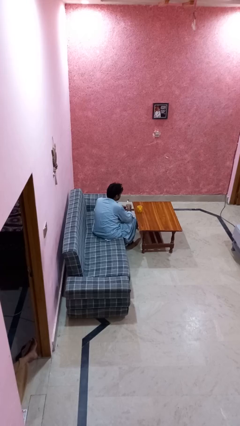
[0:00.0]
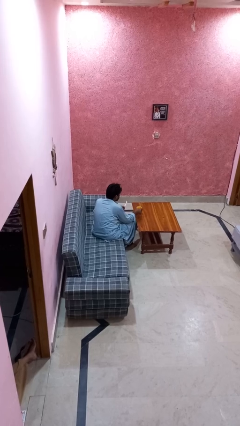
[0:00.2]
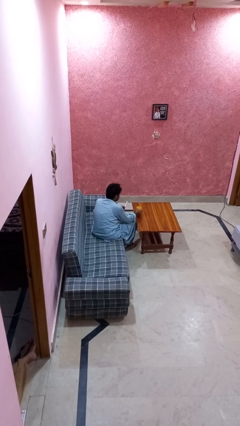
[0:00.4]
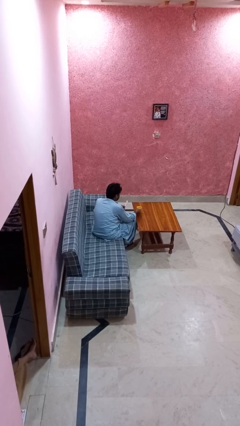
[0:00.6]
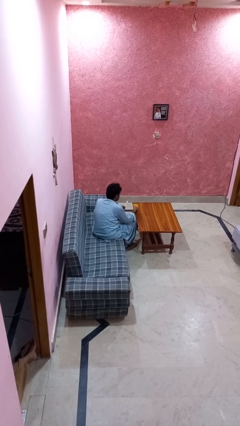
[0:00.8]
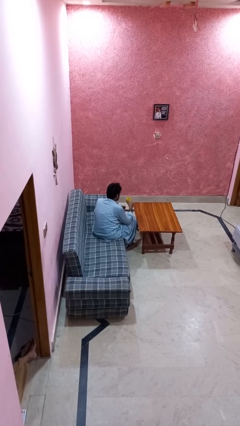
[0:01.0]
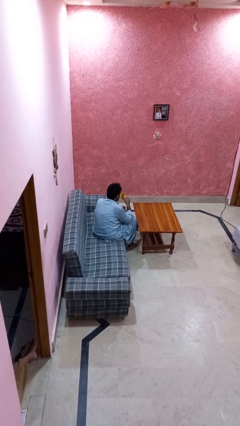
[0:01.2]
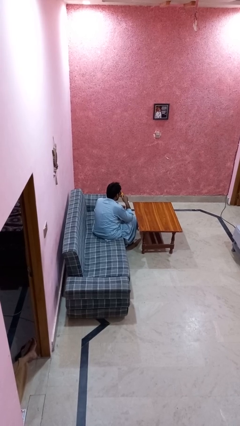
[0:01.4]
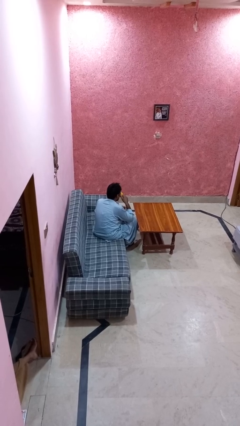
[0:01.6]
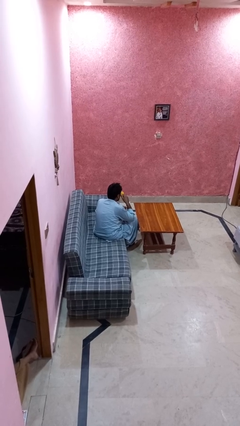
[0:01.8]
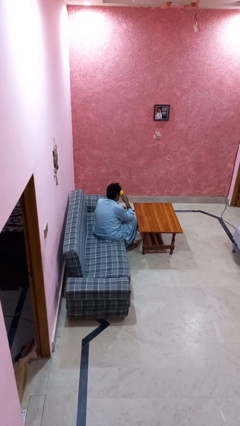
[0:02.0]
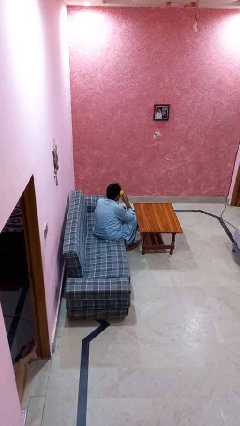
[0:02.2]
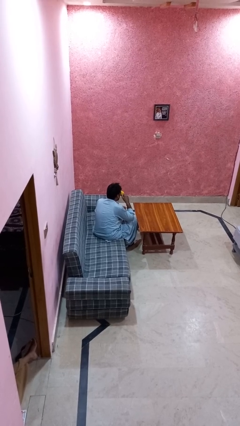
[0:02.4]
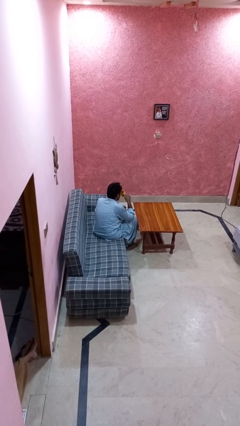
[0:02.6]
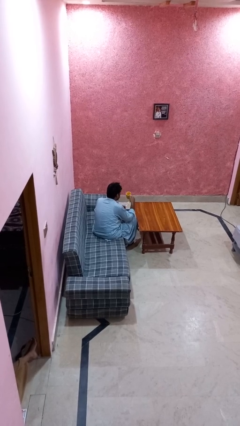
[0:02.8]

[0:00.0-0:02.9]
person drinks from mug

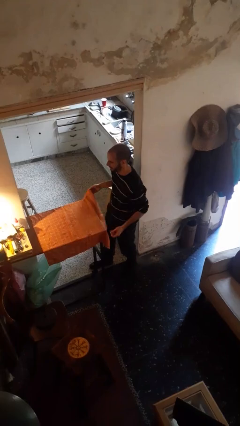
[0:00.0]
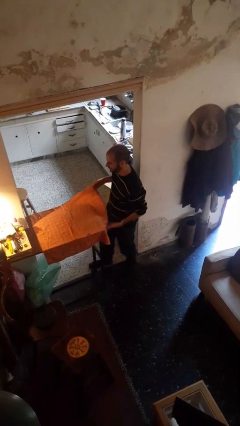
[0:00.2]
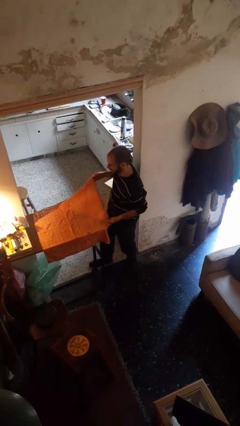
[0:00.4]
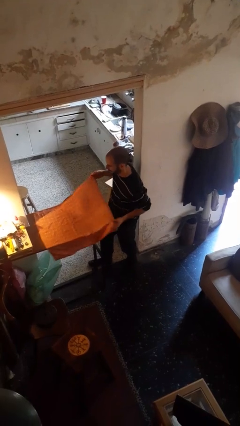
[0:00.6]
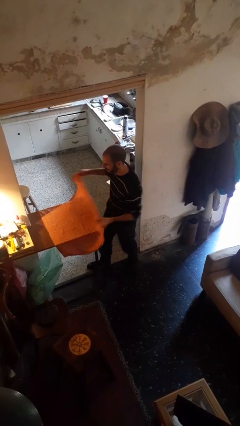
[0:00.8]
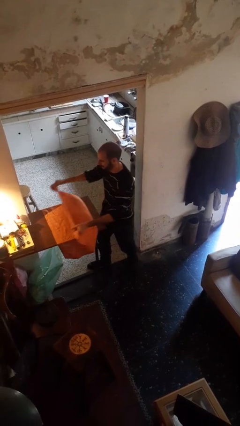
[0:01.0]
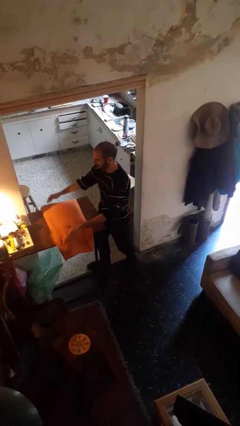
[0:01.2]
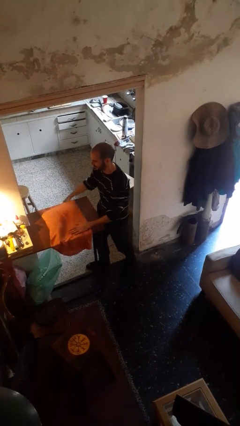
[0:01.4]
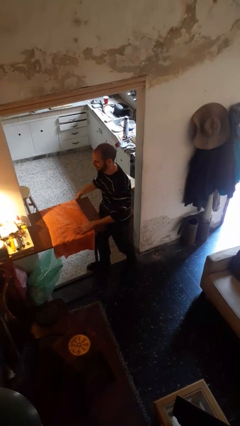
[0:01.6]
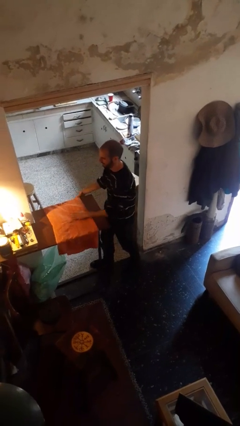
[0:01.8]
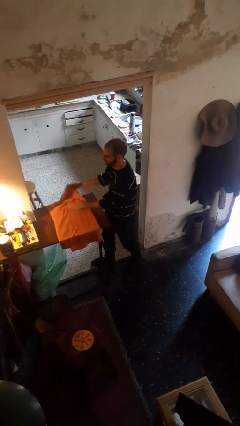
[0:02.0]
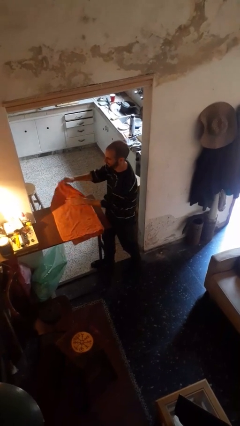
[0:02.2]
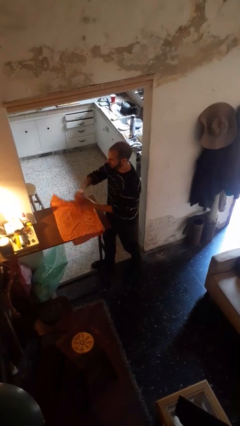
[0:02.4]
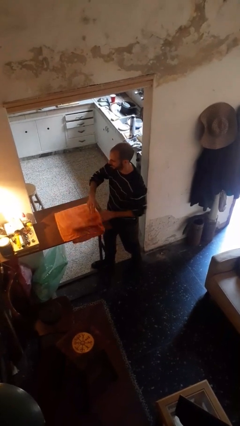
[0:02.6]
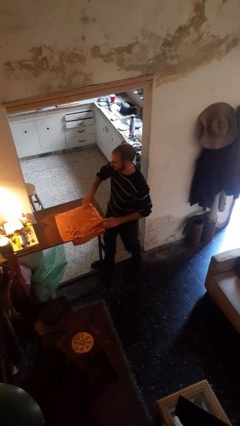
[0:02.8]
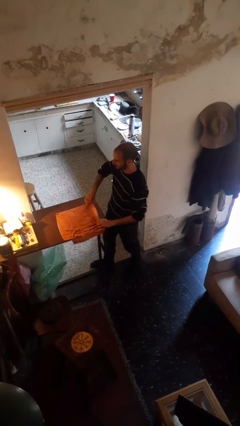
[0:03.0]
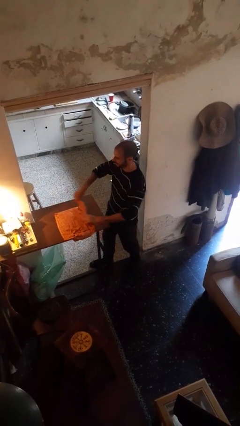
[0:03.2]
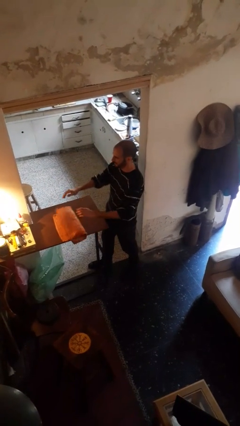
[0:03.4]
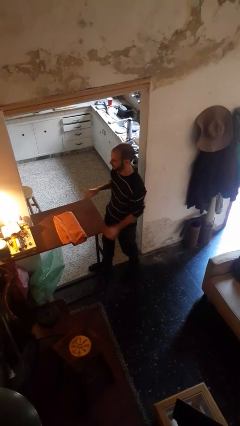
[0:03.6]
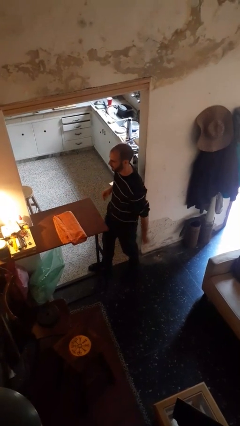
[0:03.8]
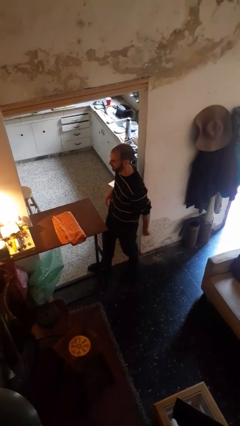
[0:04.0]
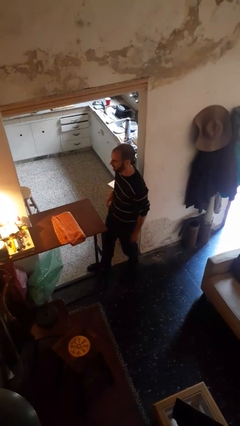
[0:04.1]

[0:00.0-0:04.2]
person folds tablecloth

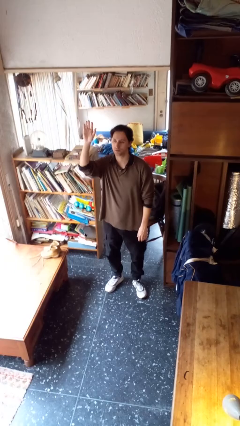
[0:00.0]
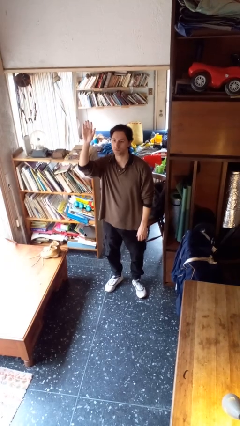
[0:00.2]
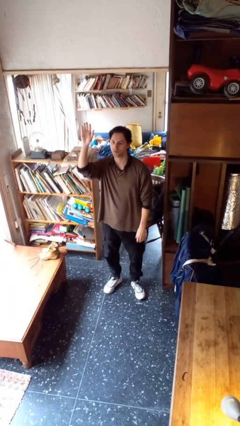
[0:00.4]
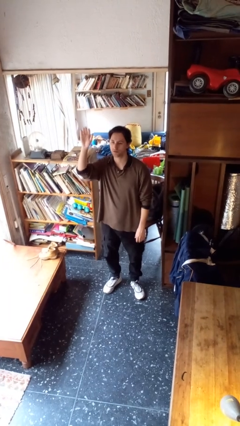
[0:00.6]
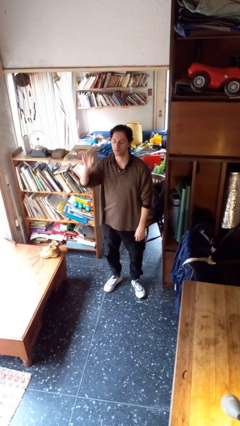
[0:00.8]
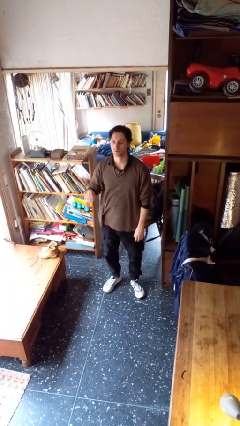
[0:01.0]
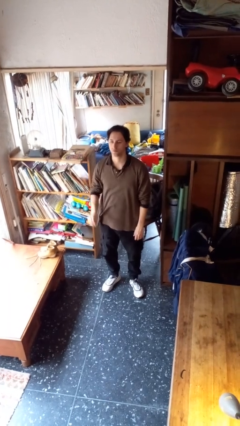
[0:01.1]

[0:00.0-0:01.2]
person gestures lower hand

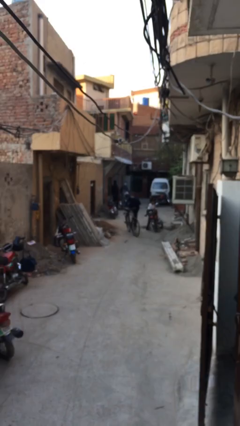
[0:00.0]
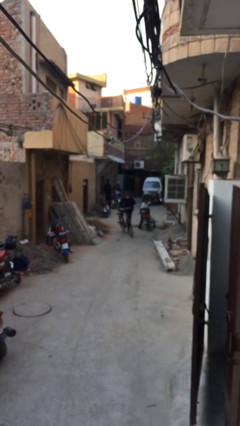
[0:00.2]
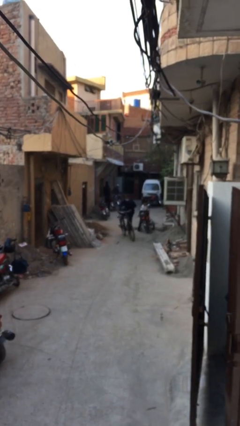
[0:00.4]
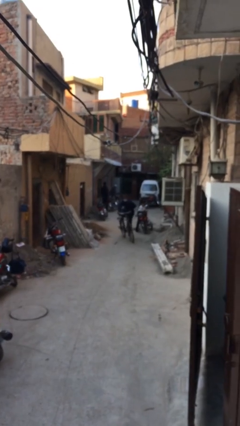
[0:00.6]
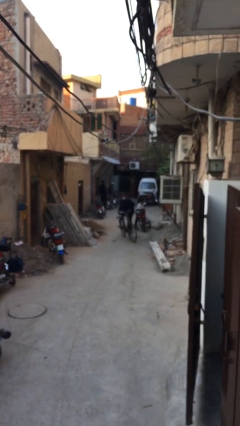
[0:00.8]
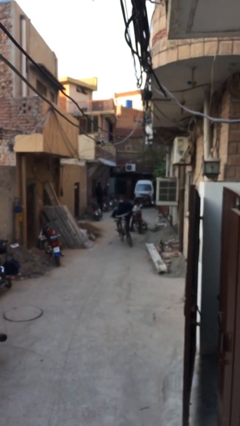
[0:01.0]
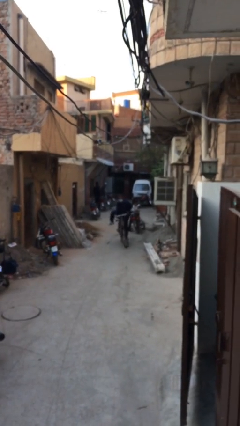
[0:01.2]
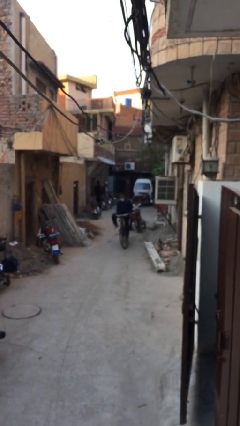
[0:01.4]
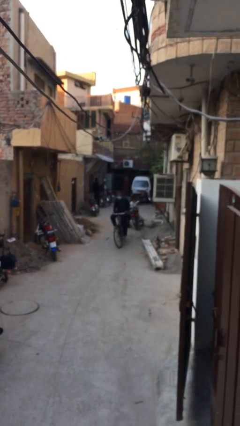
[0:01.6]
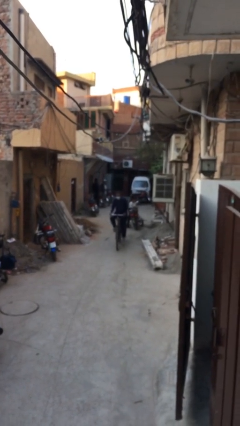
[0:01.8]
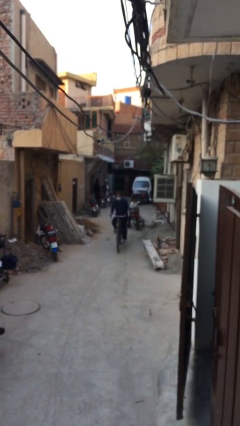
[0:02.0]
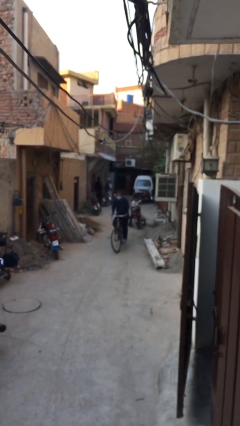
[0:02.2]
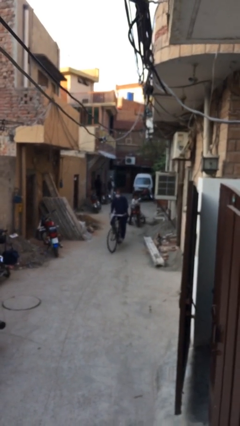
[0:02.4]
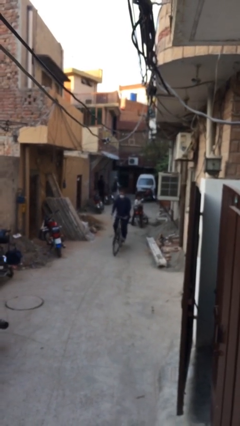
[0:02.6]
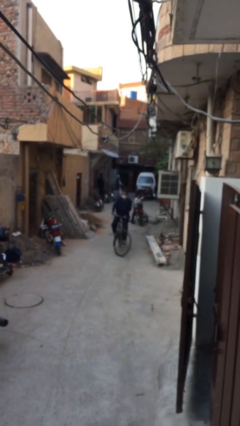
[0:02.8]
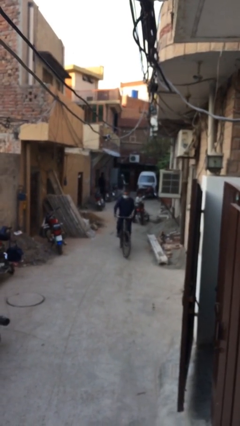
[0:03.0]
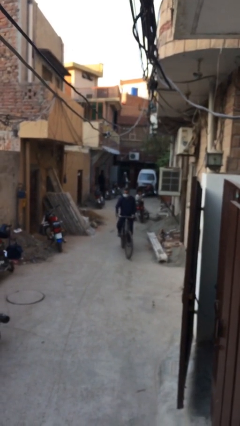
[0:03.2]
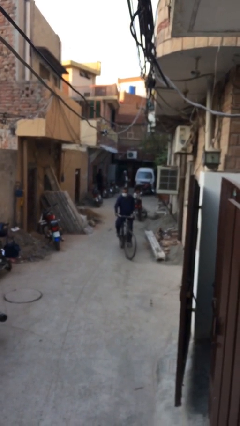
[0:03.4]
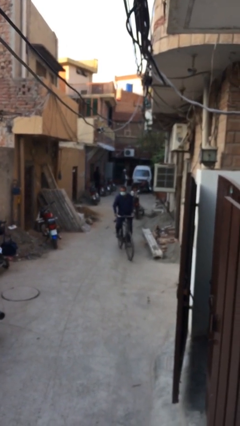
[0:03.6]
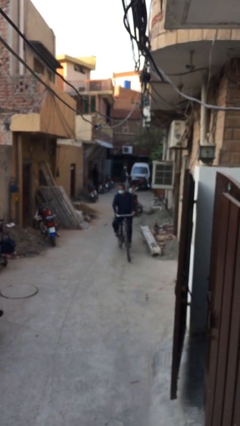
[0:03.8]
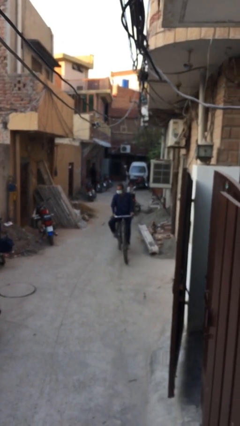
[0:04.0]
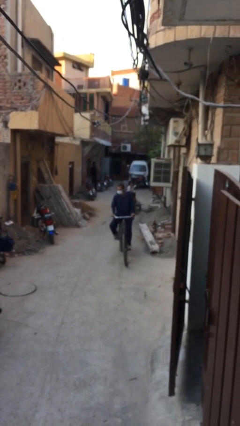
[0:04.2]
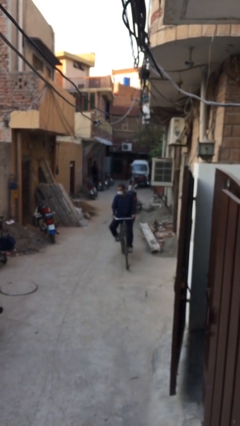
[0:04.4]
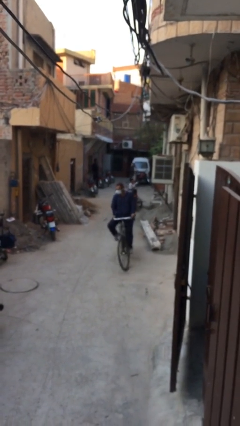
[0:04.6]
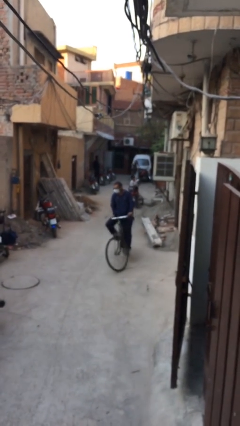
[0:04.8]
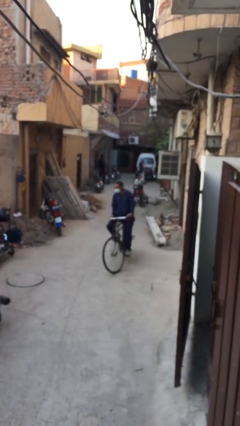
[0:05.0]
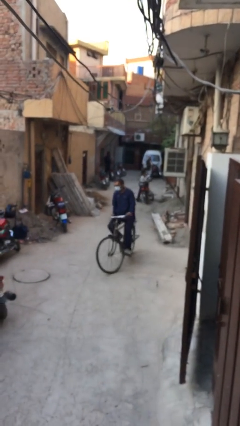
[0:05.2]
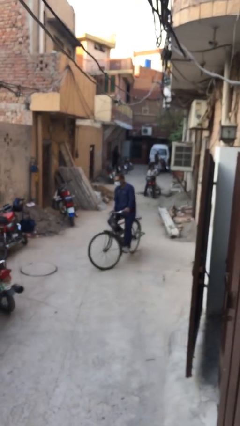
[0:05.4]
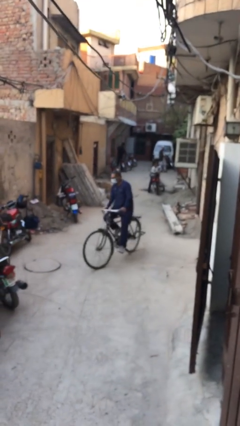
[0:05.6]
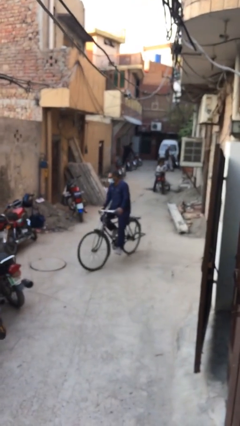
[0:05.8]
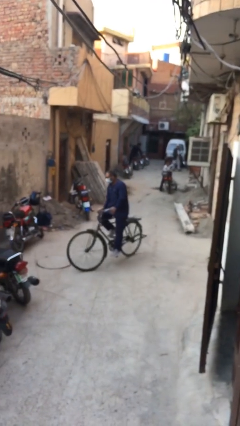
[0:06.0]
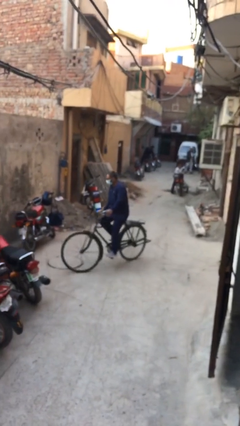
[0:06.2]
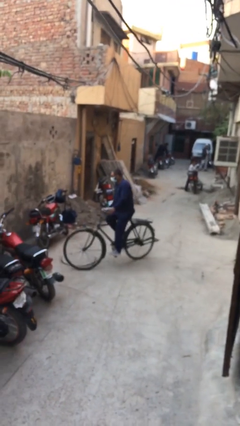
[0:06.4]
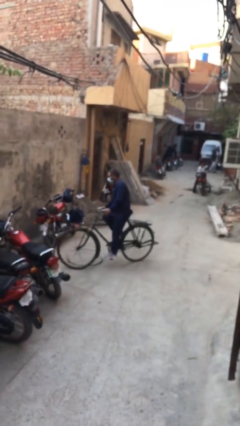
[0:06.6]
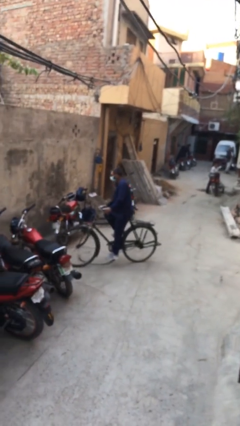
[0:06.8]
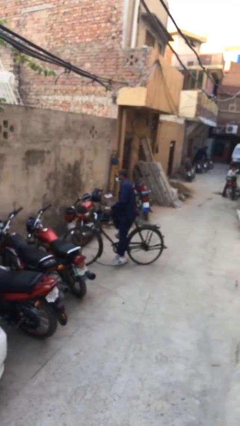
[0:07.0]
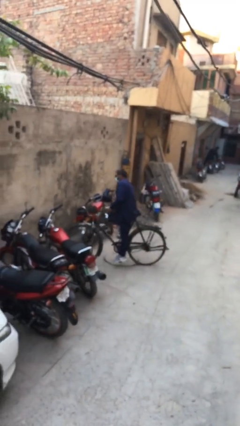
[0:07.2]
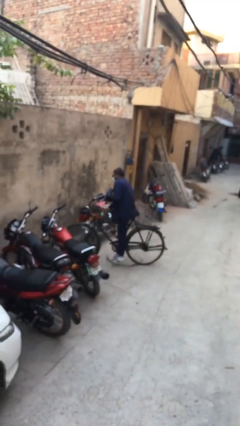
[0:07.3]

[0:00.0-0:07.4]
person rides bicycle

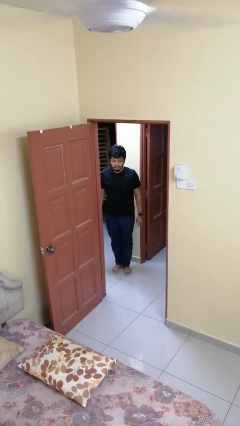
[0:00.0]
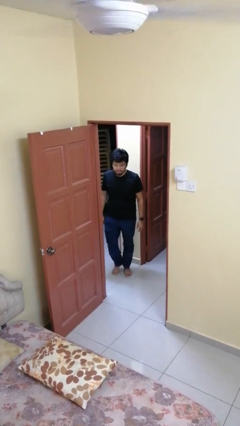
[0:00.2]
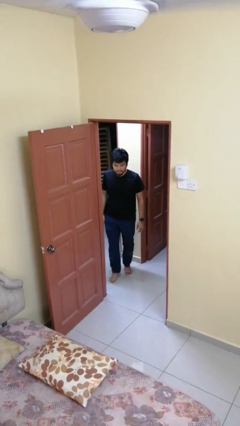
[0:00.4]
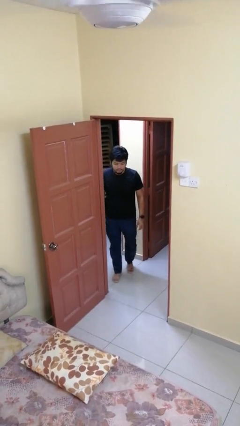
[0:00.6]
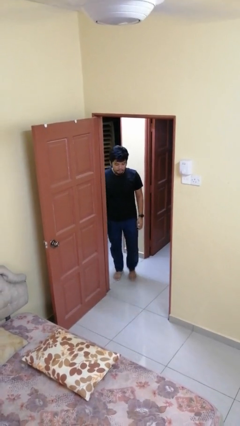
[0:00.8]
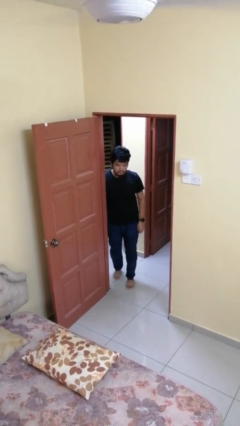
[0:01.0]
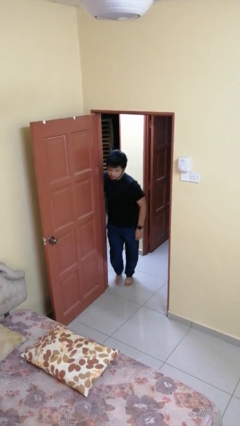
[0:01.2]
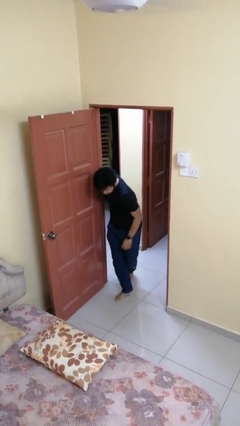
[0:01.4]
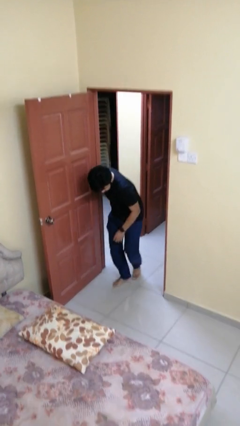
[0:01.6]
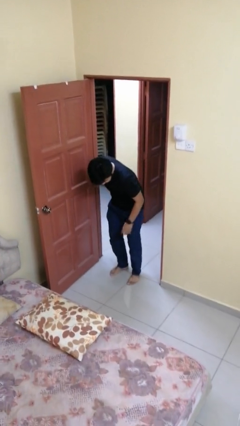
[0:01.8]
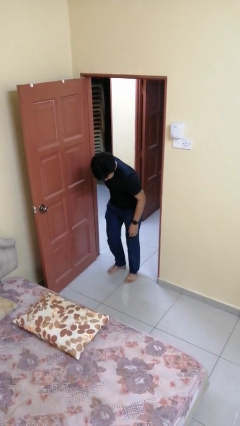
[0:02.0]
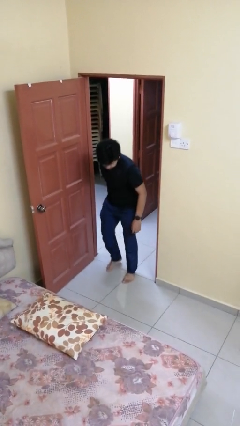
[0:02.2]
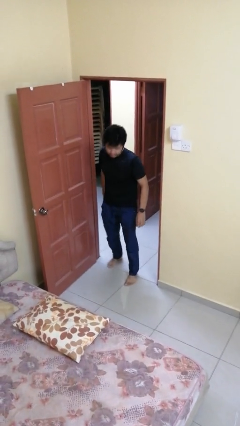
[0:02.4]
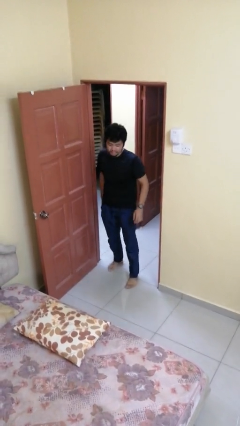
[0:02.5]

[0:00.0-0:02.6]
person bumps into wall
